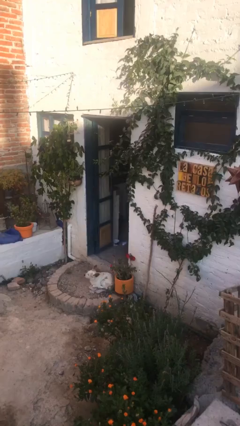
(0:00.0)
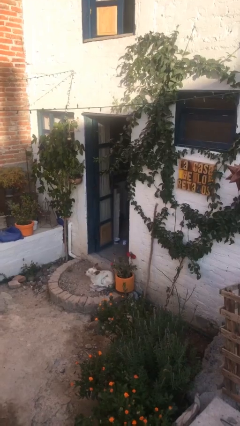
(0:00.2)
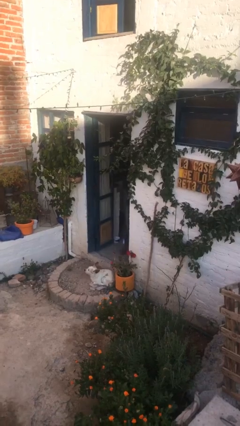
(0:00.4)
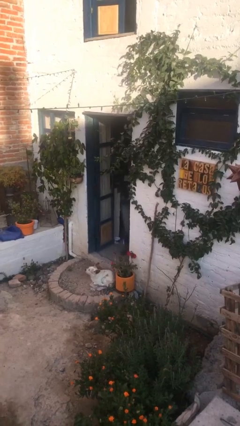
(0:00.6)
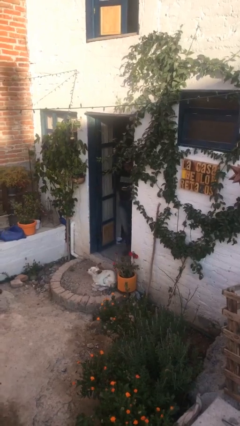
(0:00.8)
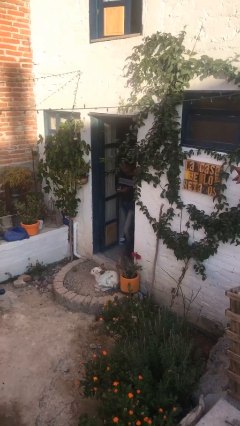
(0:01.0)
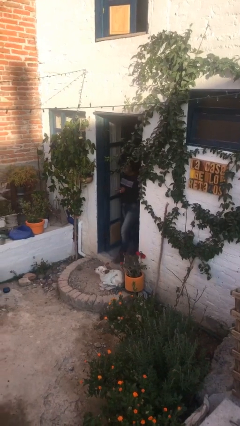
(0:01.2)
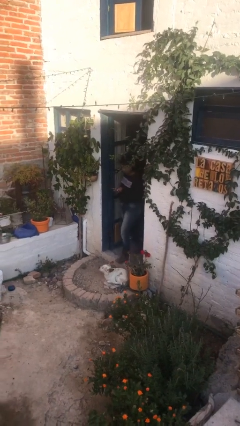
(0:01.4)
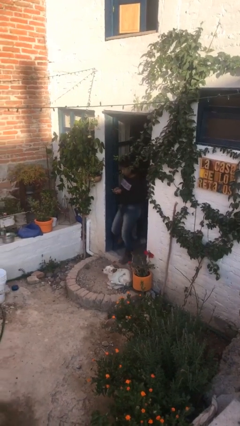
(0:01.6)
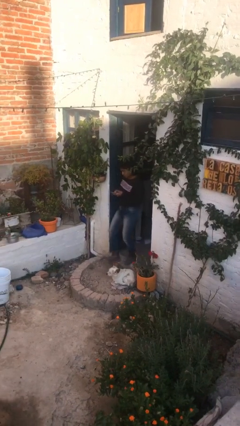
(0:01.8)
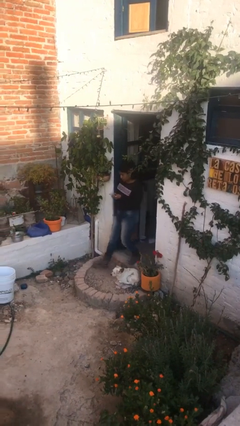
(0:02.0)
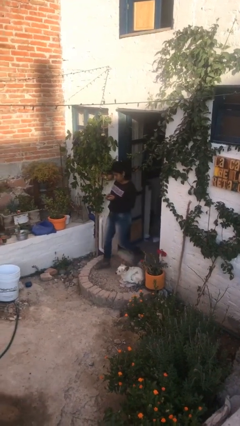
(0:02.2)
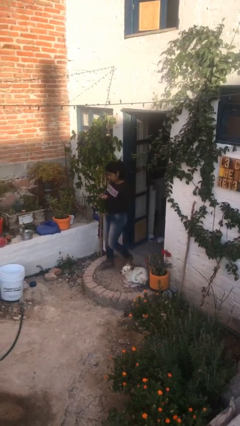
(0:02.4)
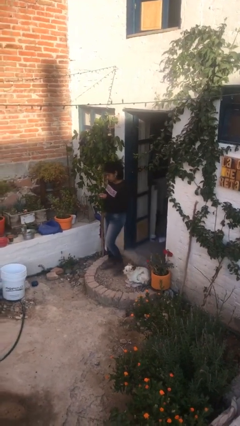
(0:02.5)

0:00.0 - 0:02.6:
person enters scene through structure

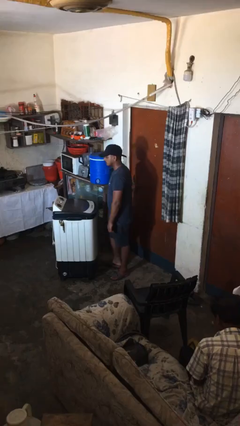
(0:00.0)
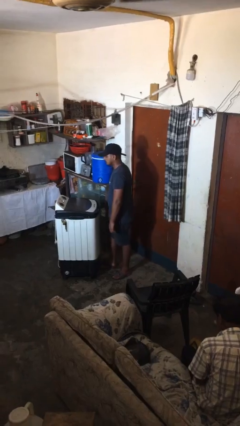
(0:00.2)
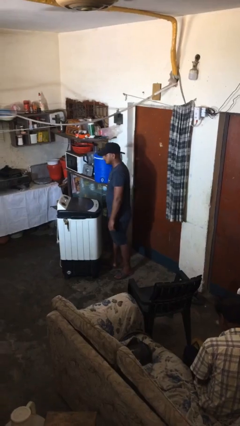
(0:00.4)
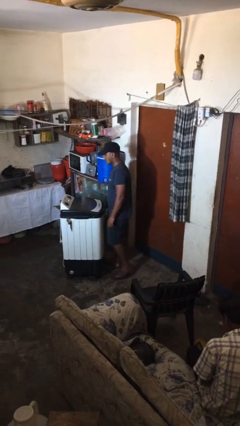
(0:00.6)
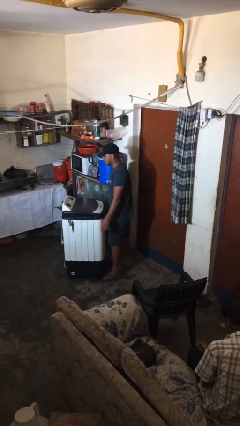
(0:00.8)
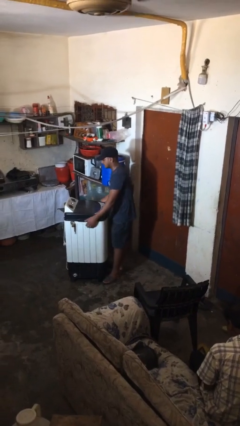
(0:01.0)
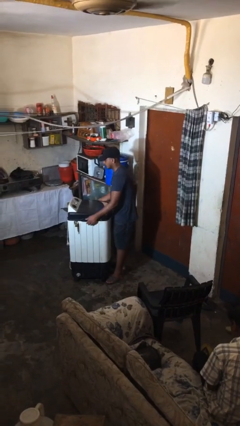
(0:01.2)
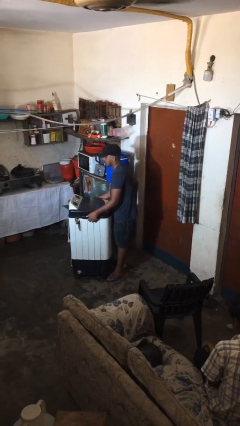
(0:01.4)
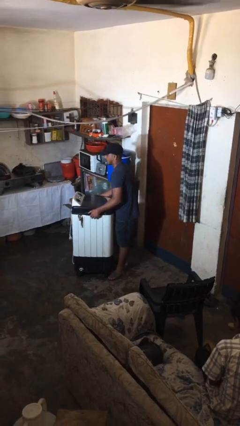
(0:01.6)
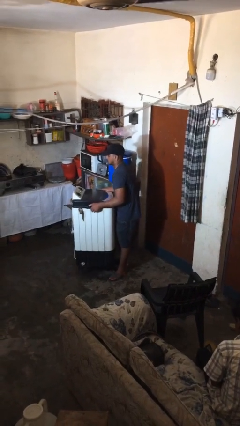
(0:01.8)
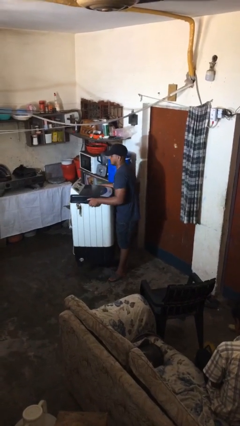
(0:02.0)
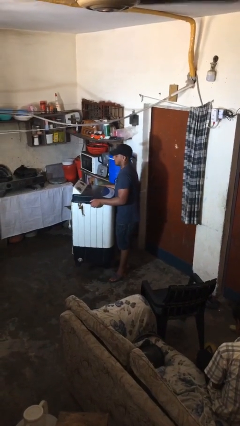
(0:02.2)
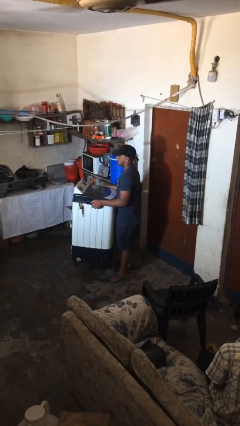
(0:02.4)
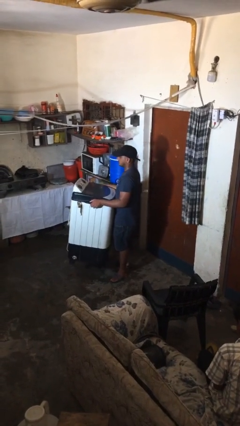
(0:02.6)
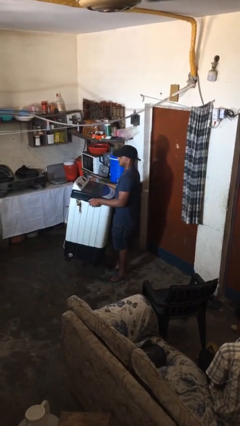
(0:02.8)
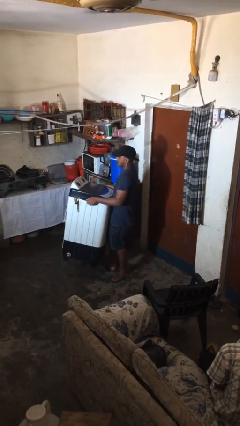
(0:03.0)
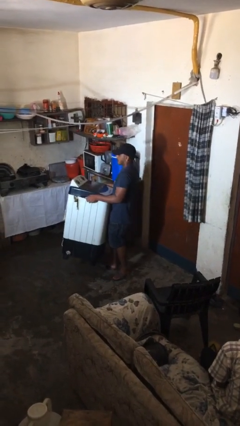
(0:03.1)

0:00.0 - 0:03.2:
person picks up object from floor

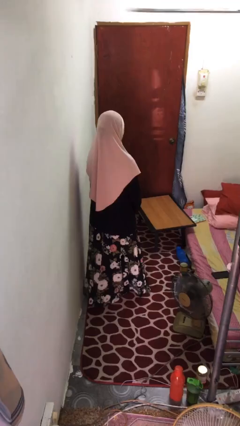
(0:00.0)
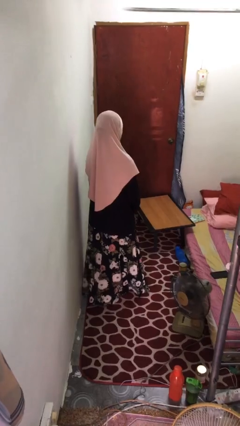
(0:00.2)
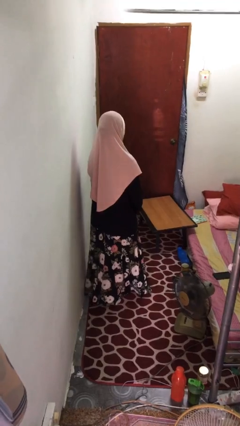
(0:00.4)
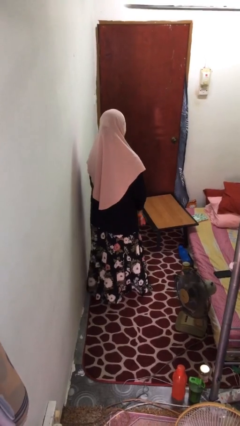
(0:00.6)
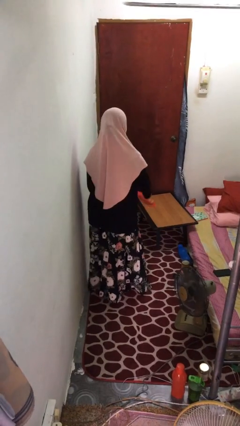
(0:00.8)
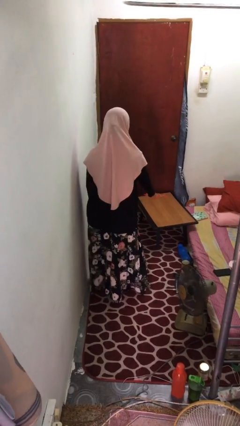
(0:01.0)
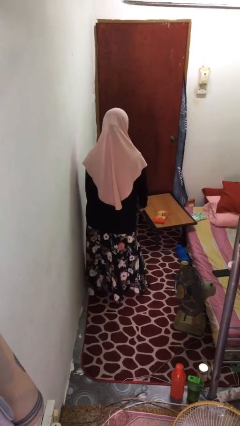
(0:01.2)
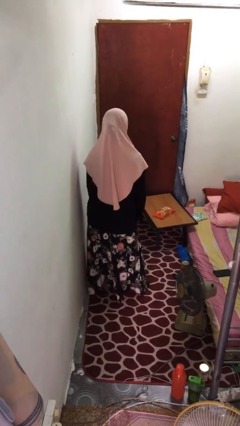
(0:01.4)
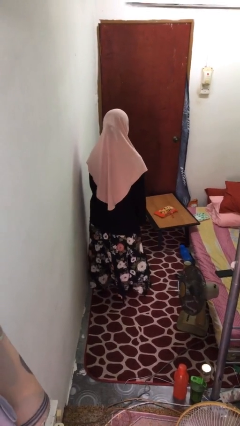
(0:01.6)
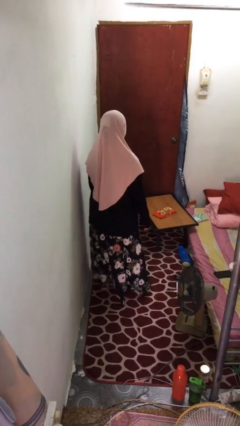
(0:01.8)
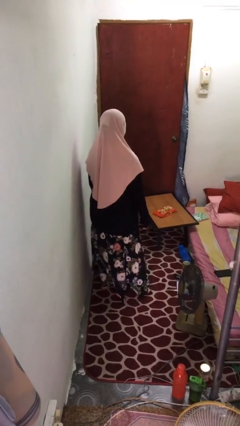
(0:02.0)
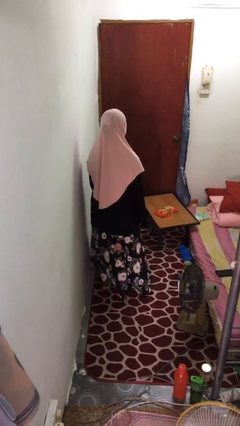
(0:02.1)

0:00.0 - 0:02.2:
person throws object on table

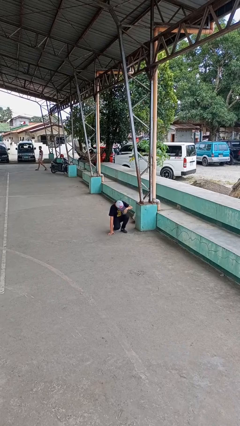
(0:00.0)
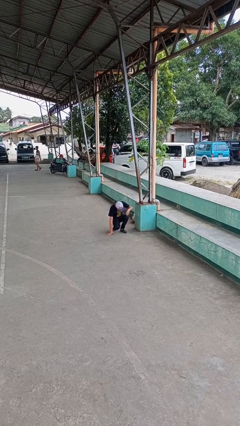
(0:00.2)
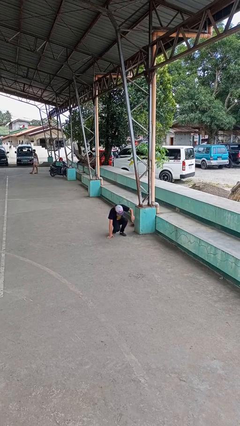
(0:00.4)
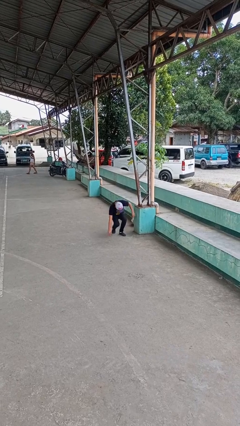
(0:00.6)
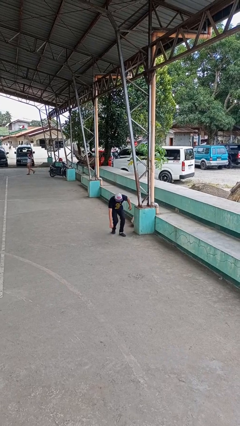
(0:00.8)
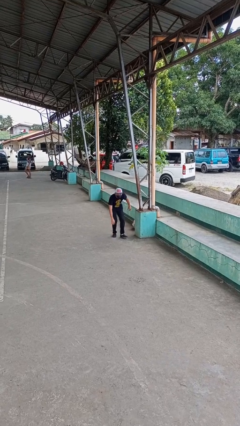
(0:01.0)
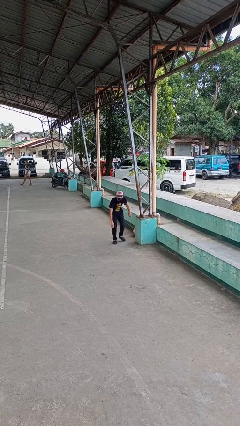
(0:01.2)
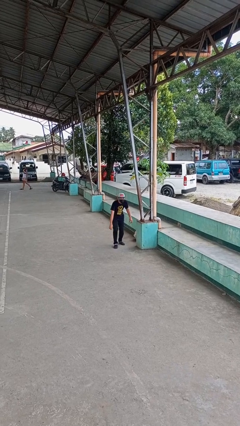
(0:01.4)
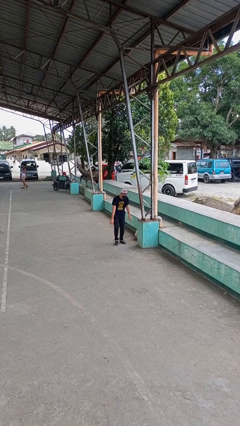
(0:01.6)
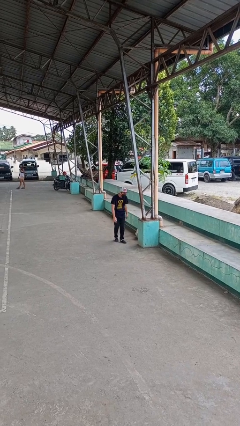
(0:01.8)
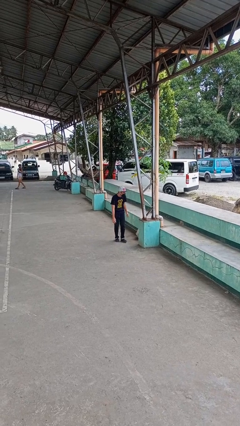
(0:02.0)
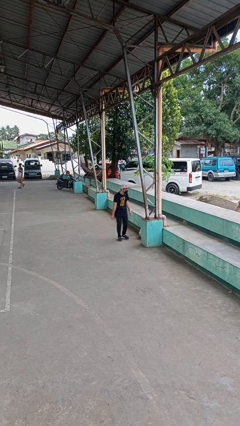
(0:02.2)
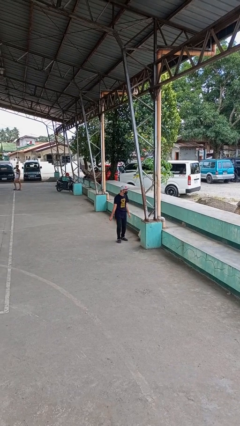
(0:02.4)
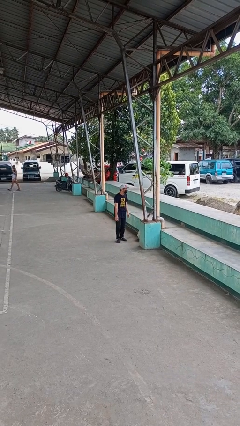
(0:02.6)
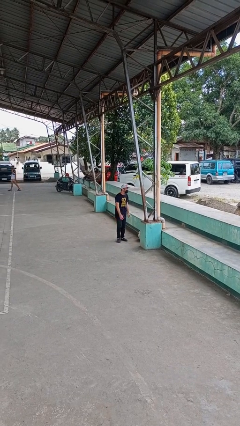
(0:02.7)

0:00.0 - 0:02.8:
person stands up from floor

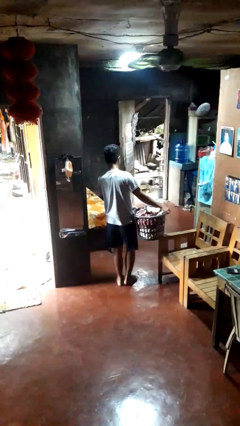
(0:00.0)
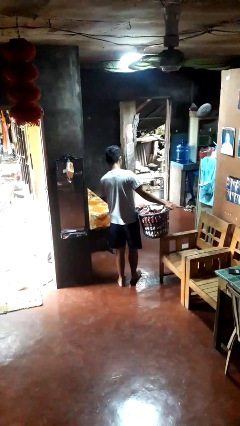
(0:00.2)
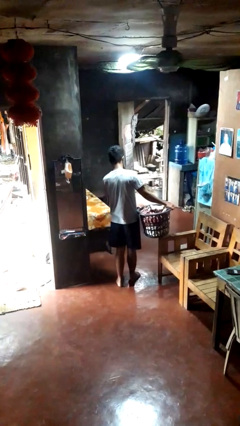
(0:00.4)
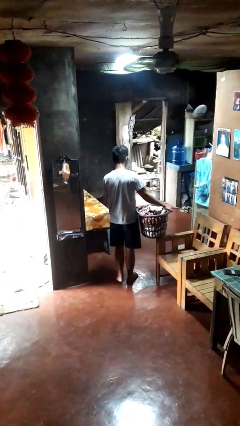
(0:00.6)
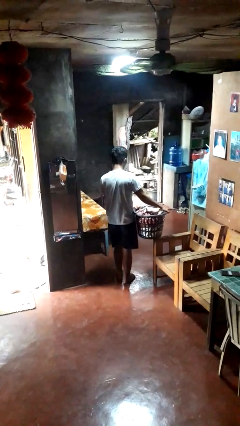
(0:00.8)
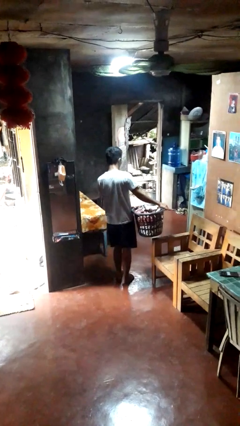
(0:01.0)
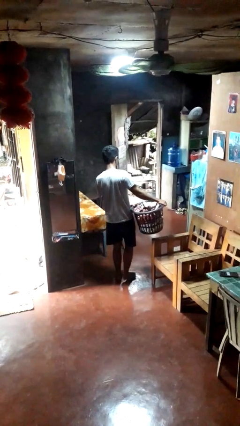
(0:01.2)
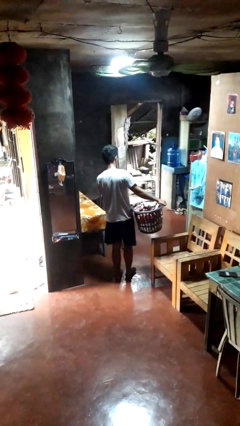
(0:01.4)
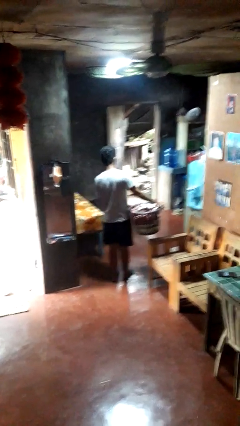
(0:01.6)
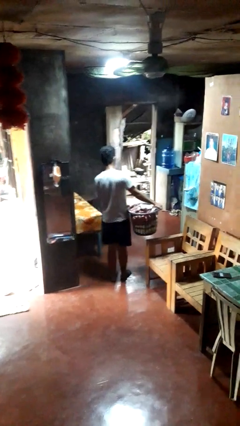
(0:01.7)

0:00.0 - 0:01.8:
person carries laundry basket

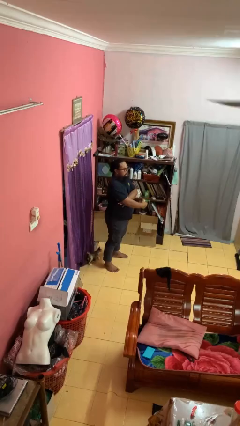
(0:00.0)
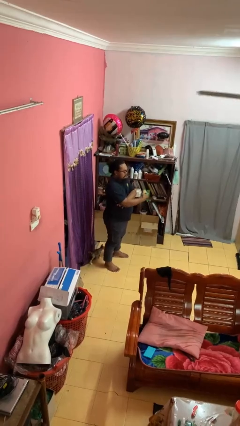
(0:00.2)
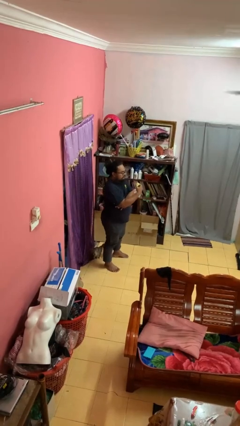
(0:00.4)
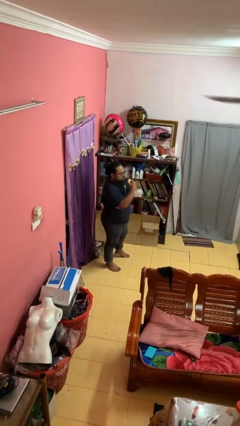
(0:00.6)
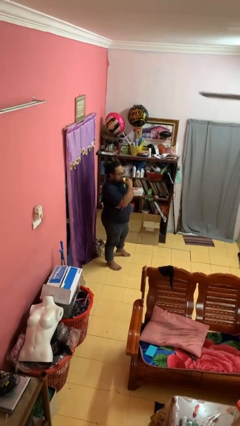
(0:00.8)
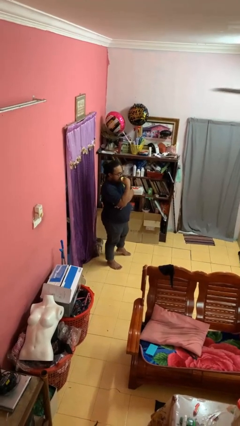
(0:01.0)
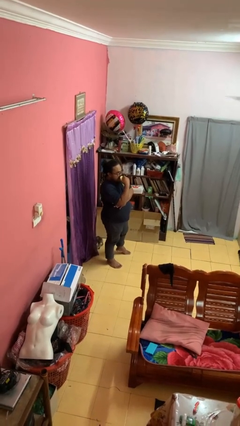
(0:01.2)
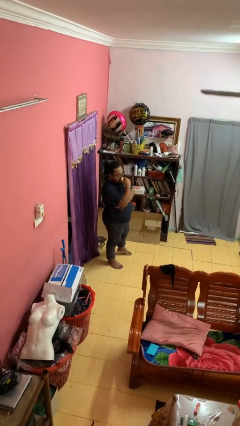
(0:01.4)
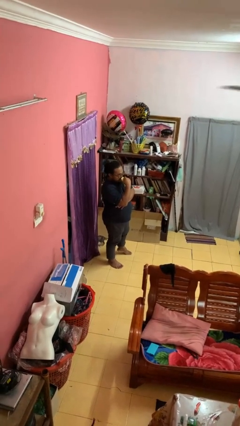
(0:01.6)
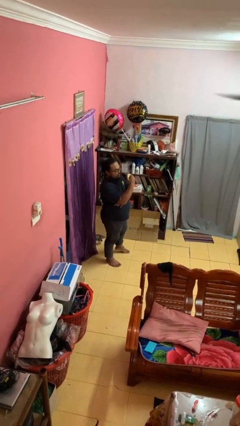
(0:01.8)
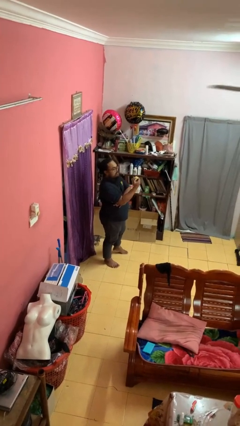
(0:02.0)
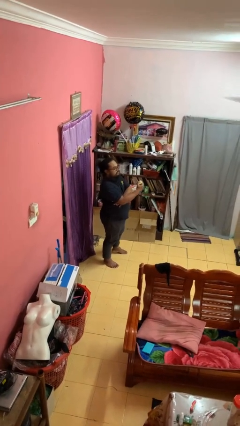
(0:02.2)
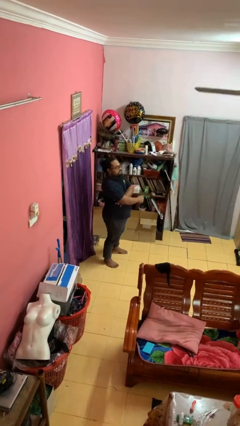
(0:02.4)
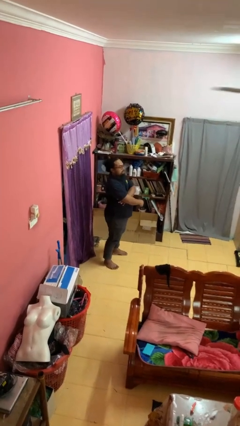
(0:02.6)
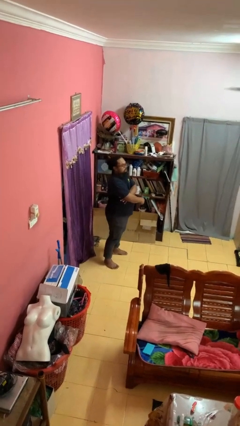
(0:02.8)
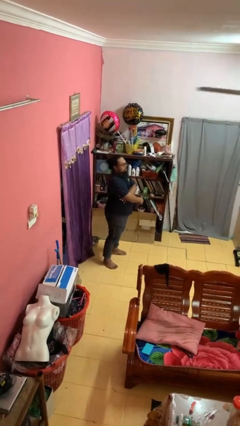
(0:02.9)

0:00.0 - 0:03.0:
person eats apple

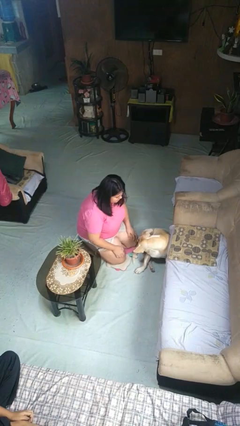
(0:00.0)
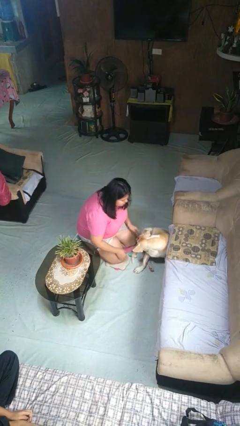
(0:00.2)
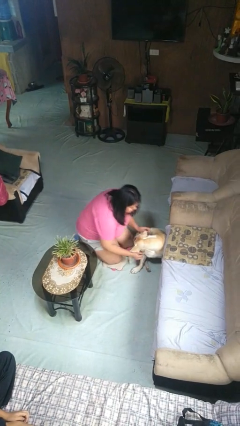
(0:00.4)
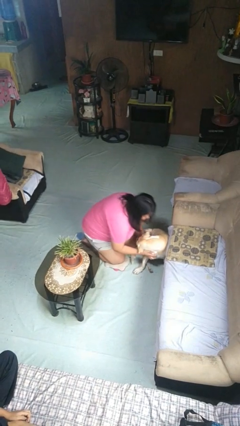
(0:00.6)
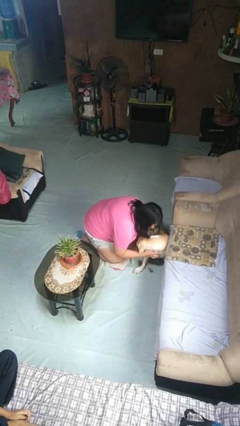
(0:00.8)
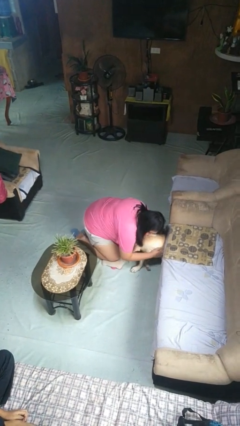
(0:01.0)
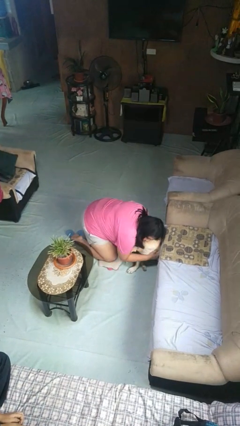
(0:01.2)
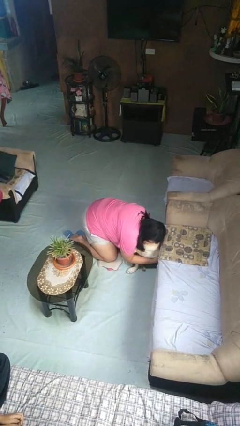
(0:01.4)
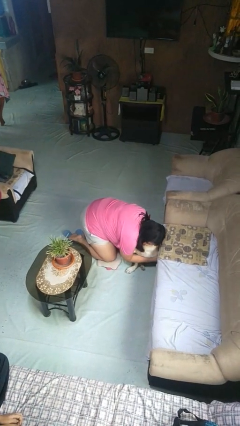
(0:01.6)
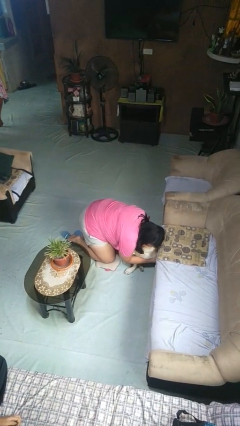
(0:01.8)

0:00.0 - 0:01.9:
person hugs dog
